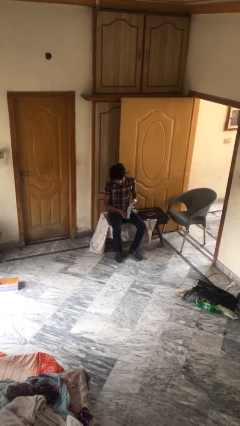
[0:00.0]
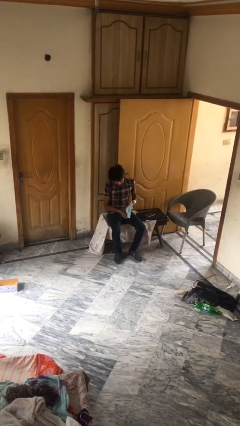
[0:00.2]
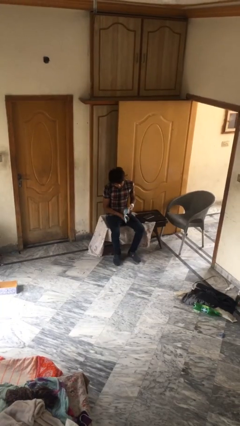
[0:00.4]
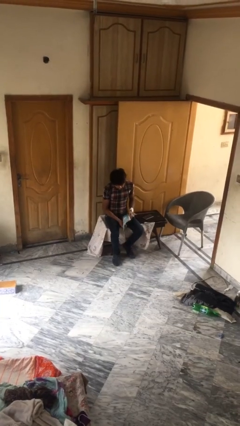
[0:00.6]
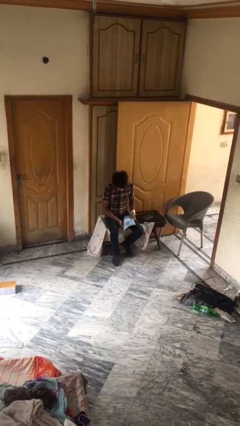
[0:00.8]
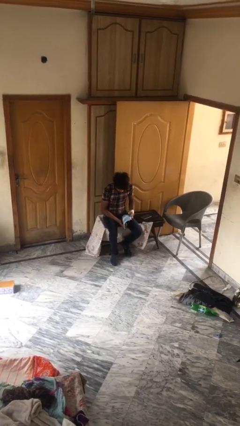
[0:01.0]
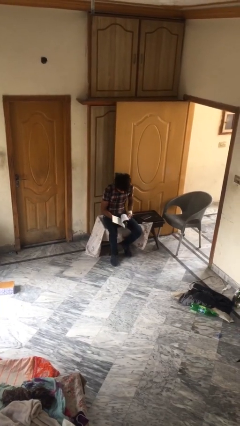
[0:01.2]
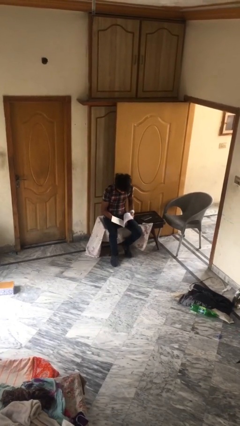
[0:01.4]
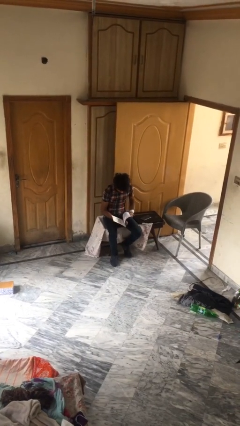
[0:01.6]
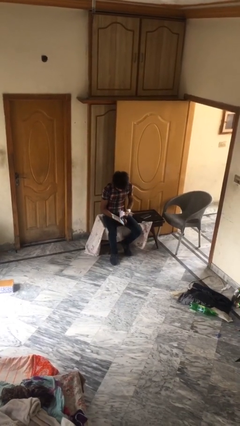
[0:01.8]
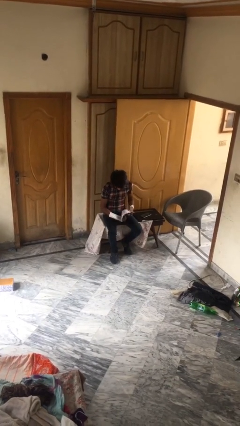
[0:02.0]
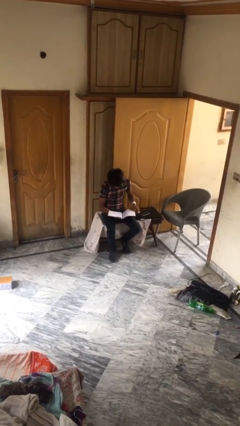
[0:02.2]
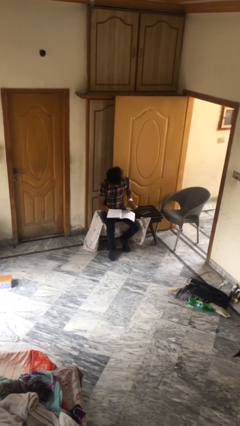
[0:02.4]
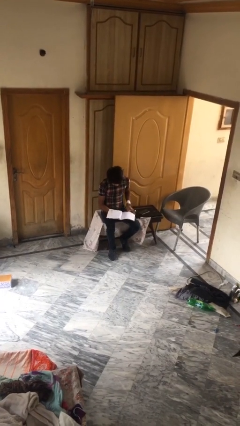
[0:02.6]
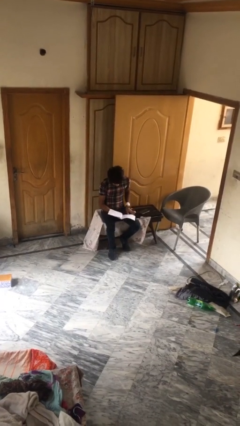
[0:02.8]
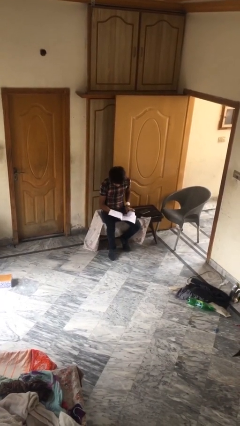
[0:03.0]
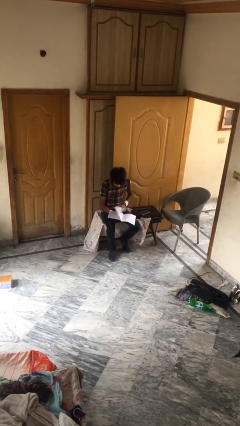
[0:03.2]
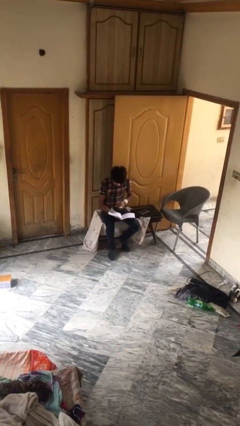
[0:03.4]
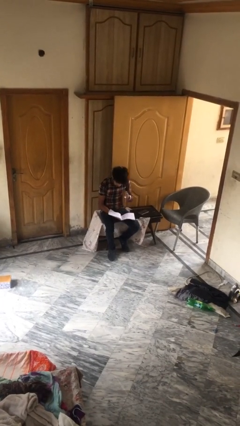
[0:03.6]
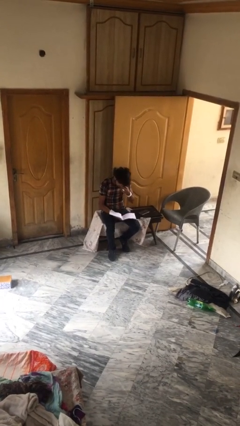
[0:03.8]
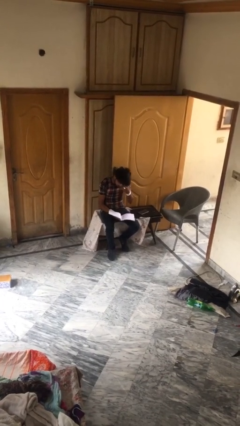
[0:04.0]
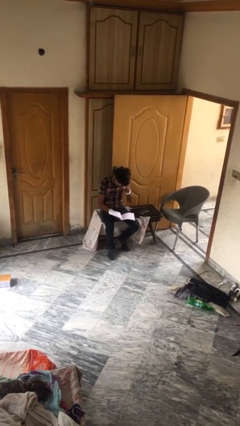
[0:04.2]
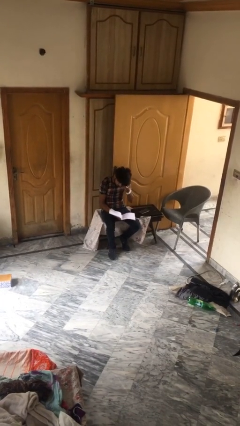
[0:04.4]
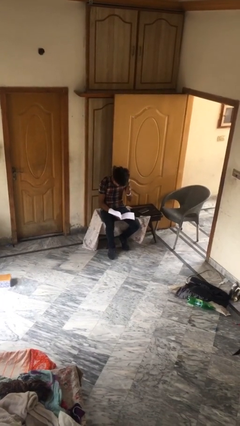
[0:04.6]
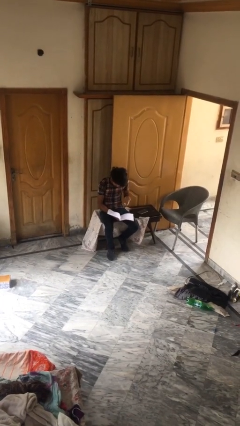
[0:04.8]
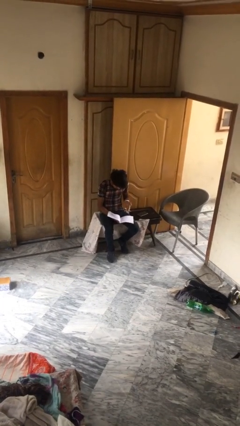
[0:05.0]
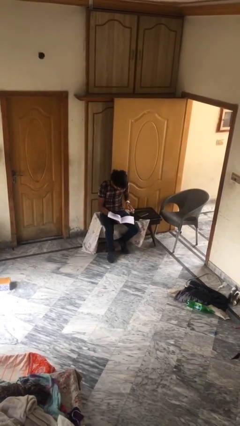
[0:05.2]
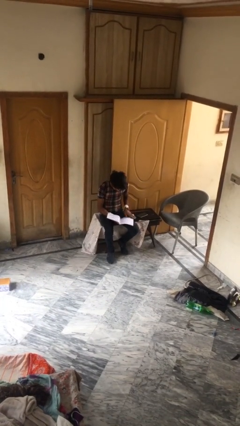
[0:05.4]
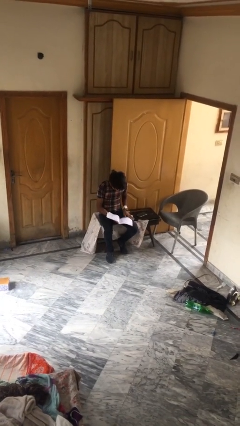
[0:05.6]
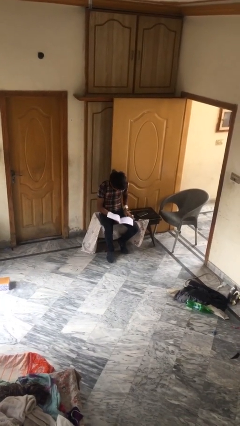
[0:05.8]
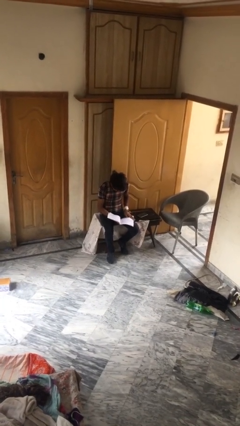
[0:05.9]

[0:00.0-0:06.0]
person reads document

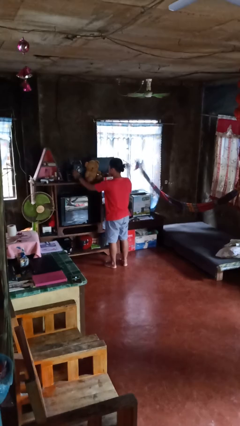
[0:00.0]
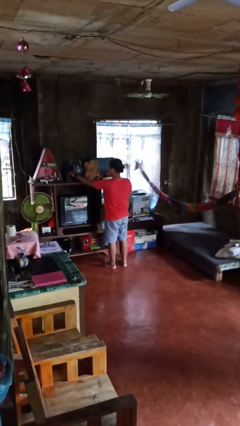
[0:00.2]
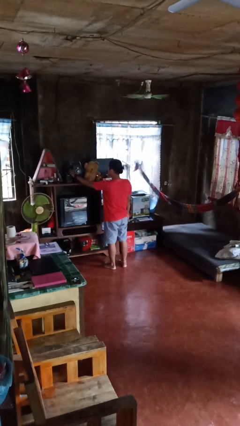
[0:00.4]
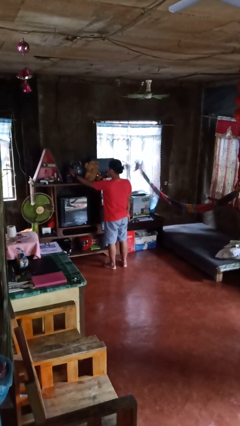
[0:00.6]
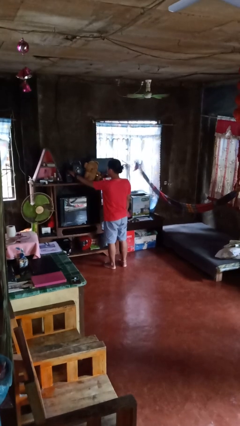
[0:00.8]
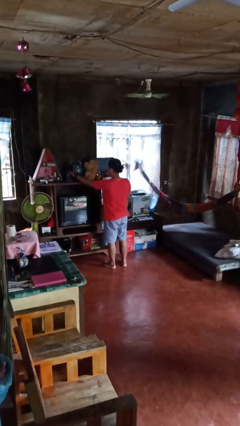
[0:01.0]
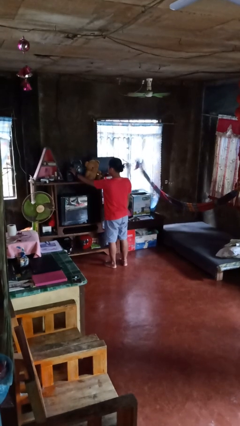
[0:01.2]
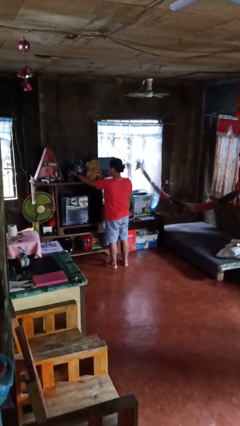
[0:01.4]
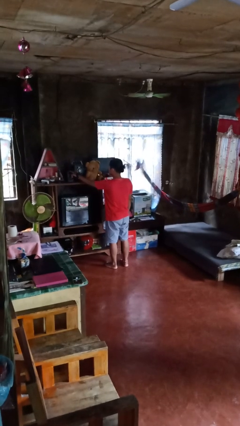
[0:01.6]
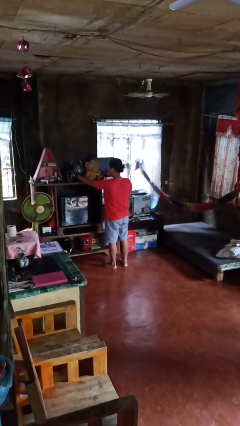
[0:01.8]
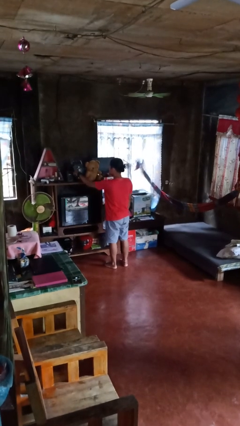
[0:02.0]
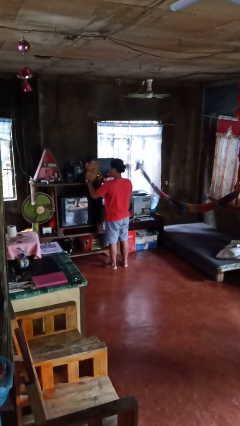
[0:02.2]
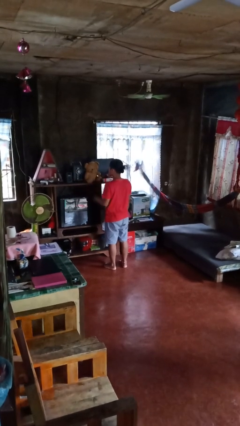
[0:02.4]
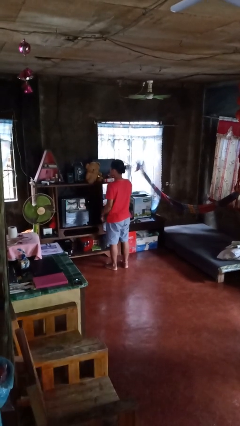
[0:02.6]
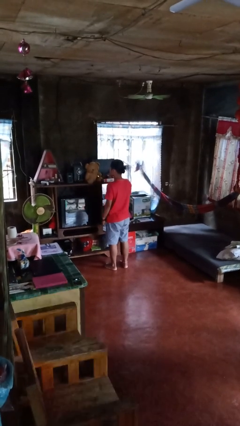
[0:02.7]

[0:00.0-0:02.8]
person taps object with finger

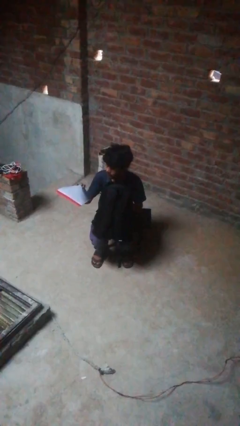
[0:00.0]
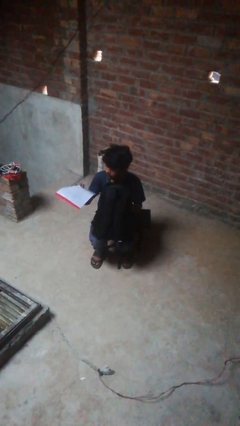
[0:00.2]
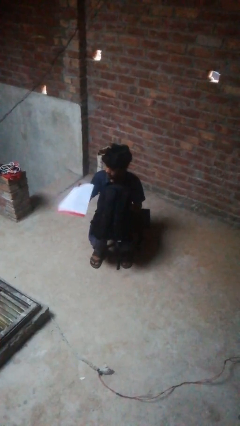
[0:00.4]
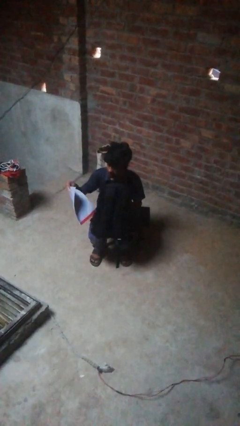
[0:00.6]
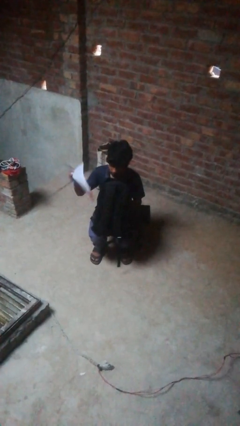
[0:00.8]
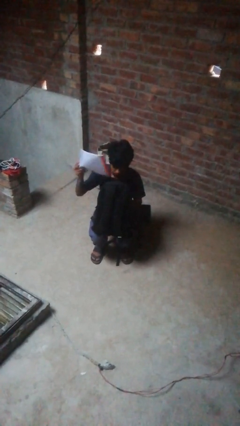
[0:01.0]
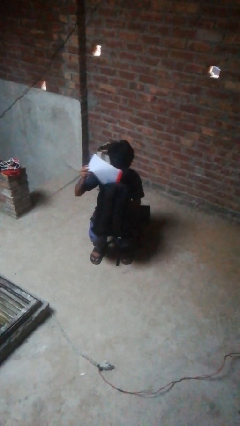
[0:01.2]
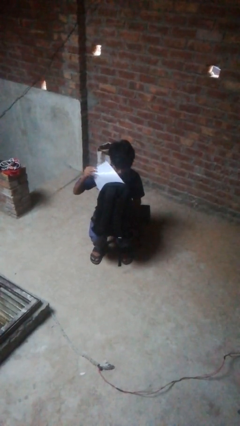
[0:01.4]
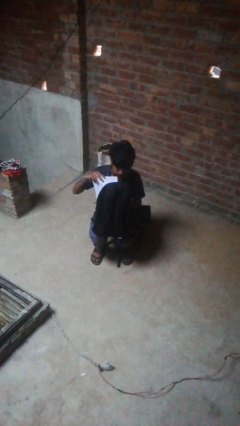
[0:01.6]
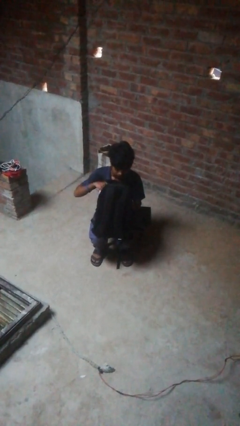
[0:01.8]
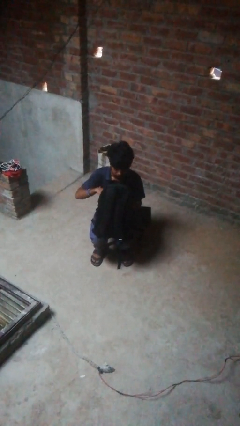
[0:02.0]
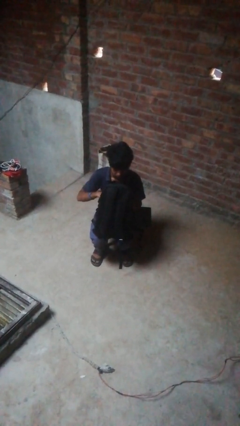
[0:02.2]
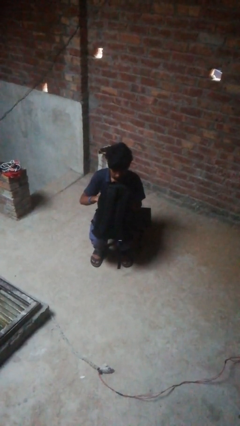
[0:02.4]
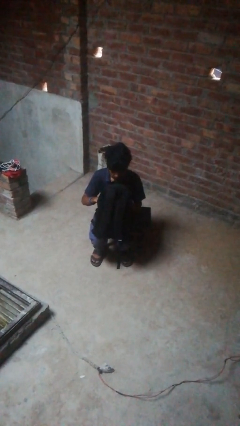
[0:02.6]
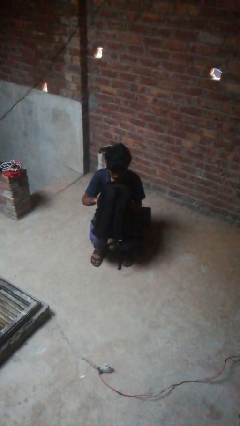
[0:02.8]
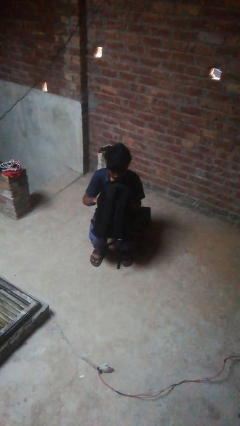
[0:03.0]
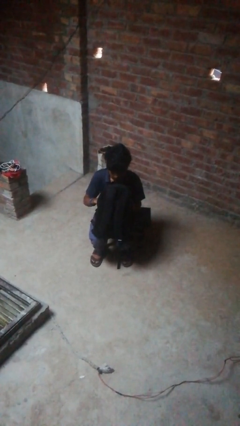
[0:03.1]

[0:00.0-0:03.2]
person puts object into backpack

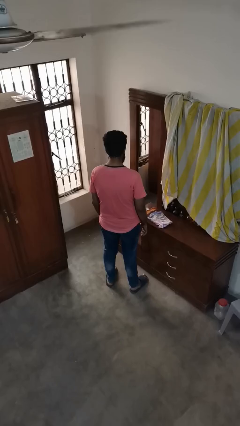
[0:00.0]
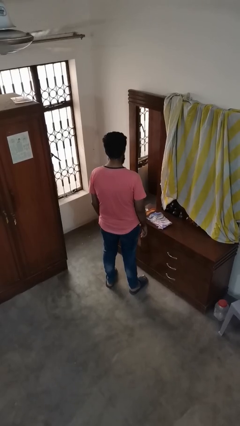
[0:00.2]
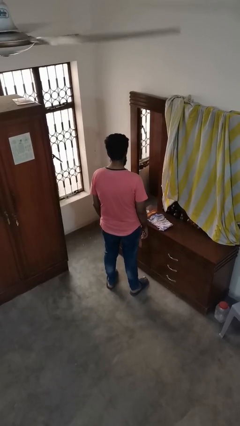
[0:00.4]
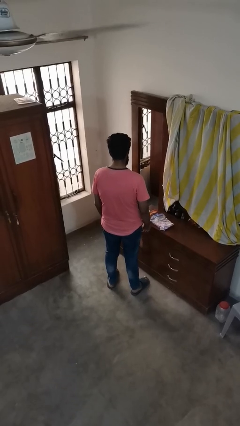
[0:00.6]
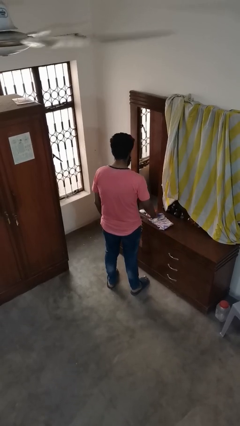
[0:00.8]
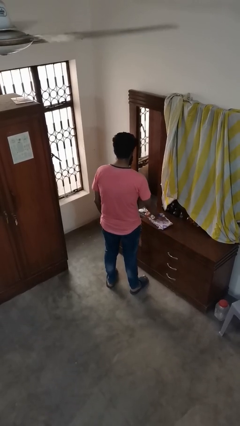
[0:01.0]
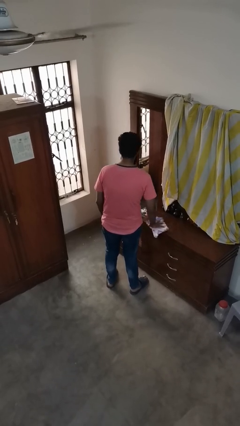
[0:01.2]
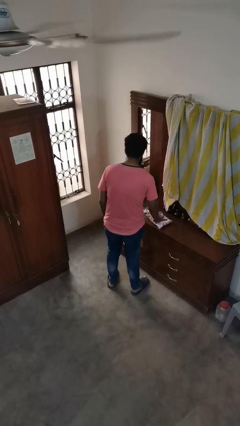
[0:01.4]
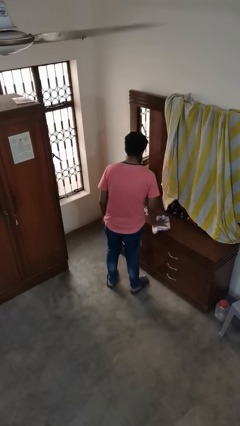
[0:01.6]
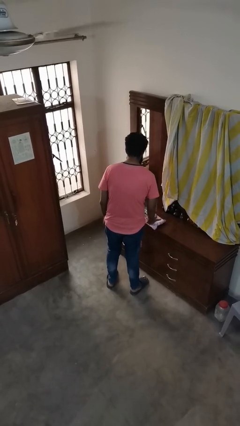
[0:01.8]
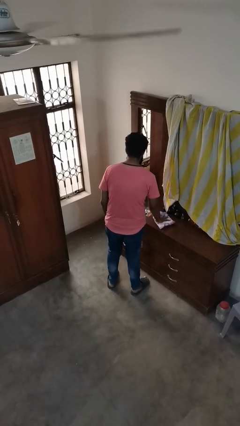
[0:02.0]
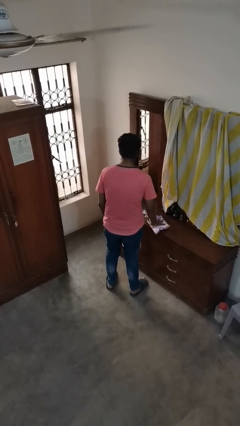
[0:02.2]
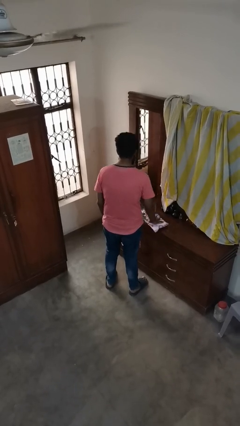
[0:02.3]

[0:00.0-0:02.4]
person cleans table with rag

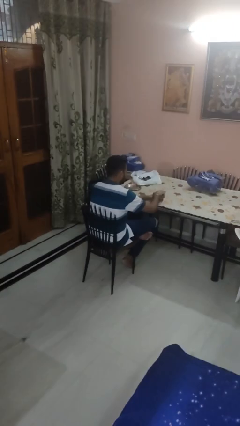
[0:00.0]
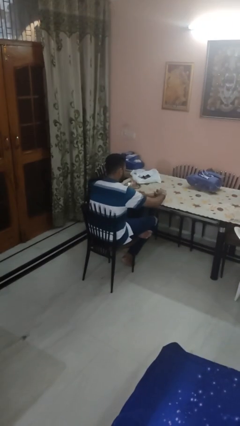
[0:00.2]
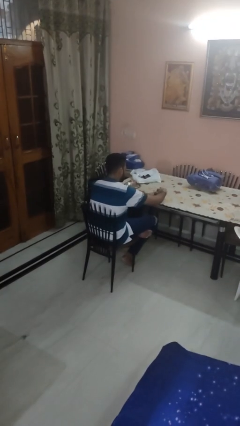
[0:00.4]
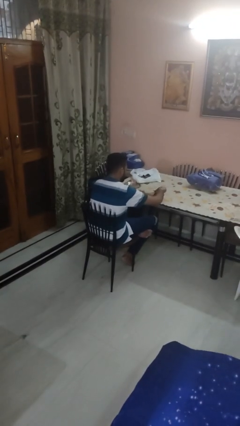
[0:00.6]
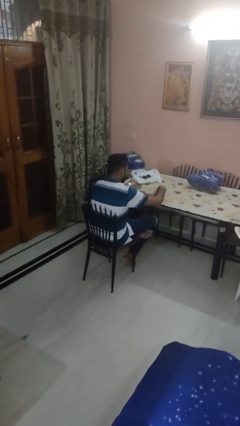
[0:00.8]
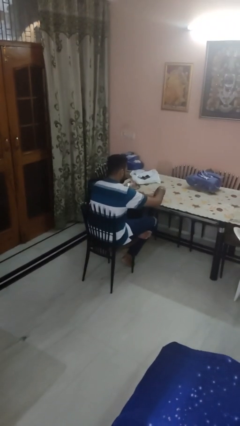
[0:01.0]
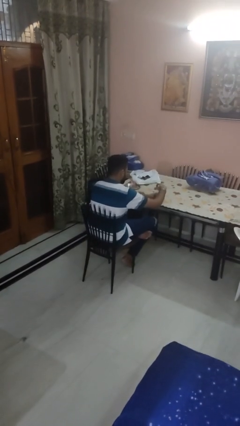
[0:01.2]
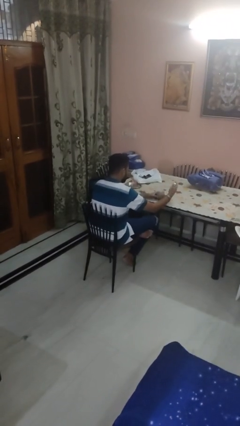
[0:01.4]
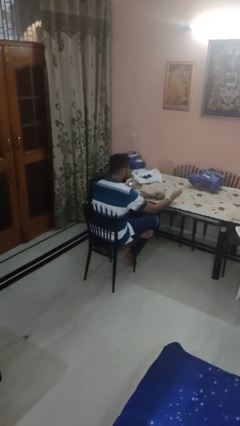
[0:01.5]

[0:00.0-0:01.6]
person opens jar

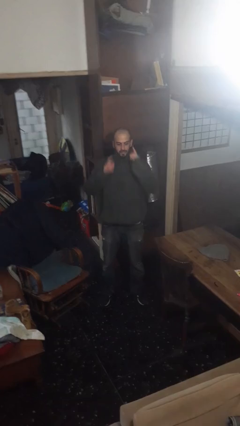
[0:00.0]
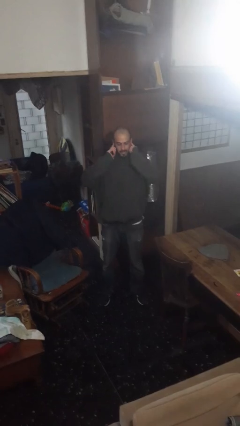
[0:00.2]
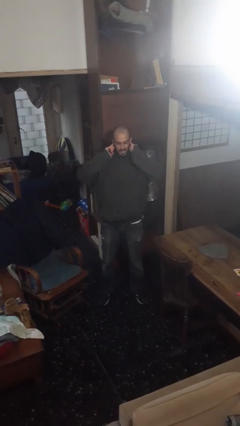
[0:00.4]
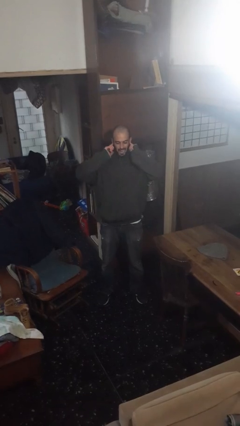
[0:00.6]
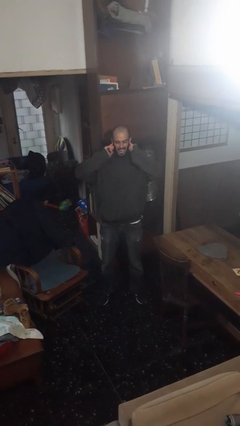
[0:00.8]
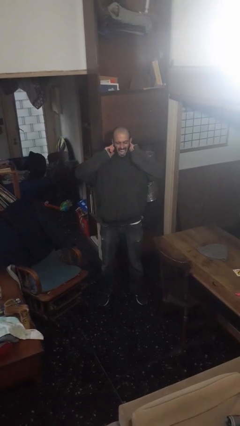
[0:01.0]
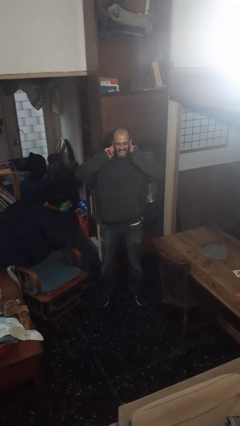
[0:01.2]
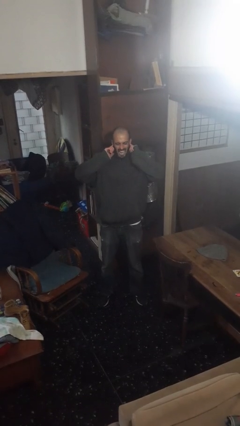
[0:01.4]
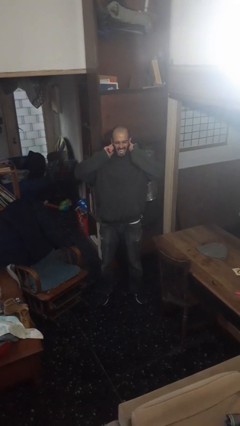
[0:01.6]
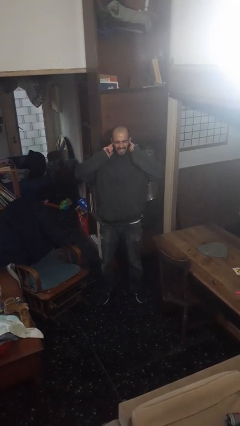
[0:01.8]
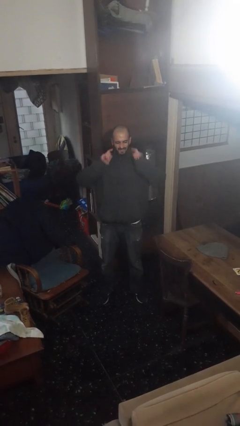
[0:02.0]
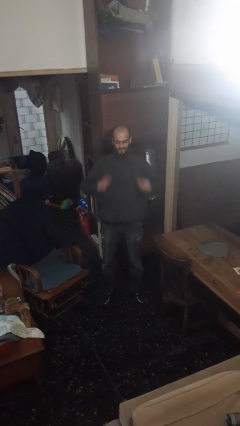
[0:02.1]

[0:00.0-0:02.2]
person puts fingers in ear
